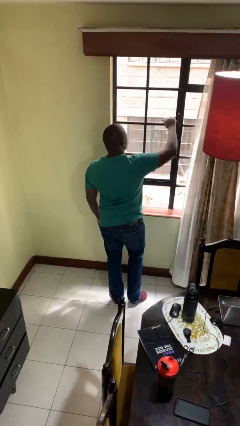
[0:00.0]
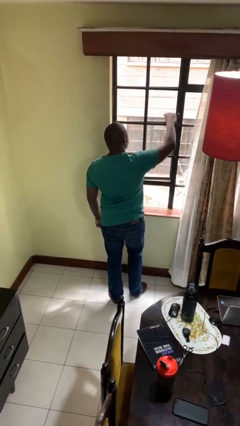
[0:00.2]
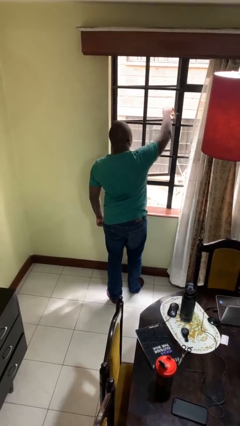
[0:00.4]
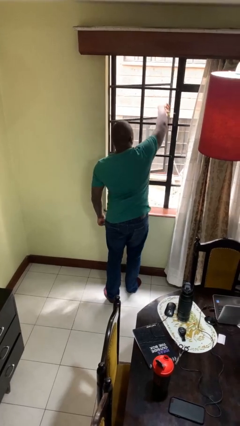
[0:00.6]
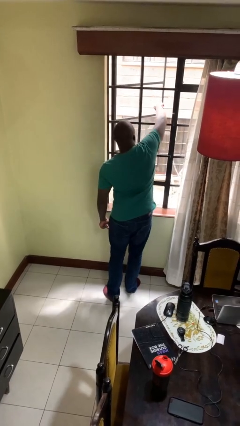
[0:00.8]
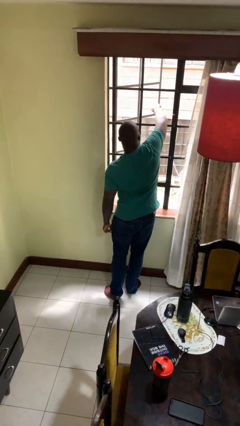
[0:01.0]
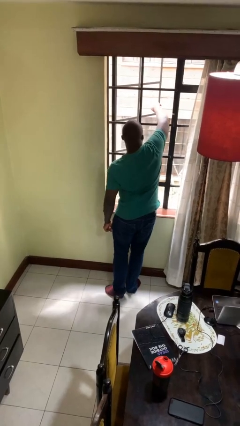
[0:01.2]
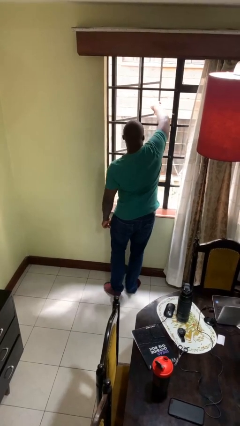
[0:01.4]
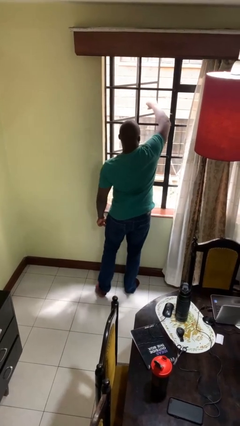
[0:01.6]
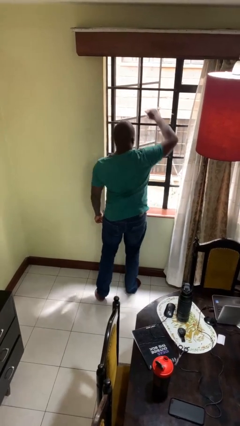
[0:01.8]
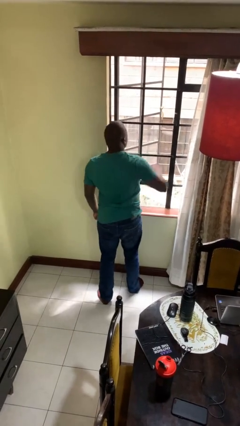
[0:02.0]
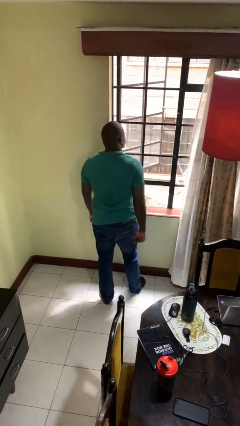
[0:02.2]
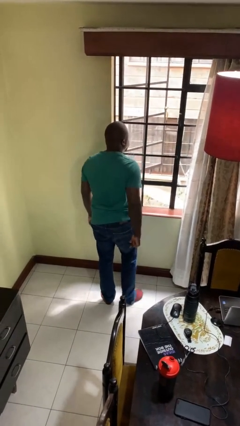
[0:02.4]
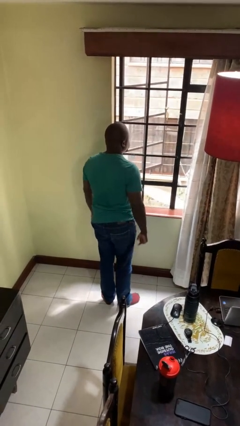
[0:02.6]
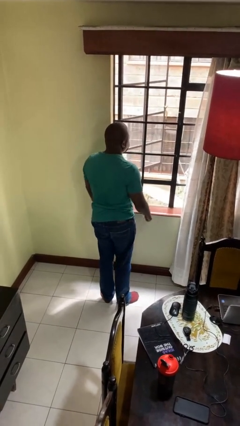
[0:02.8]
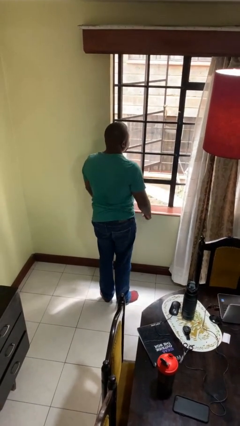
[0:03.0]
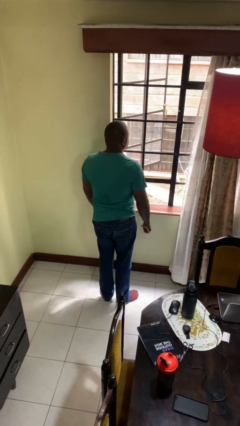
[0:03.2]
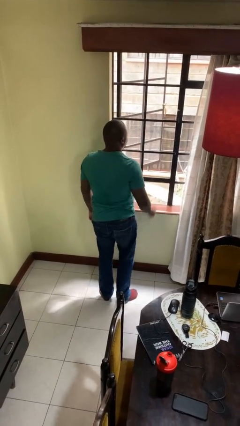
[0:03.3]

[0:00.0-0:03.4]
person opens home window

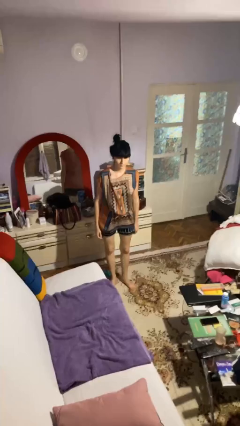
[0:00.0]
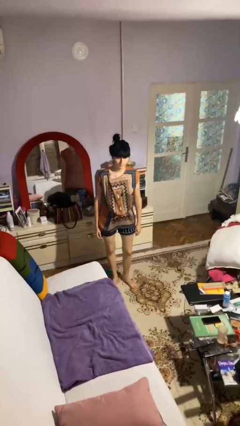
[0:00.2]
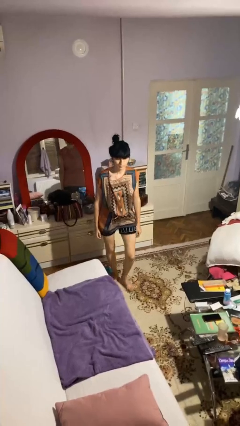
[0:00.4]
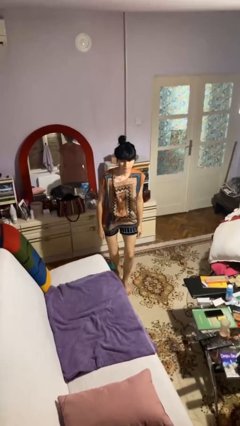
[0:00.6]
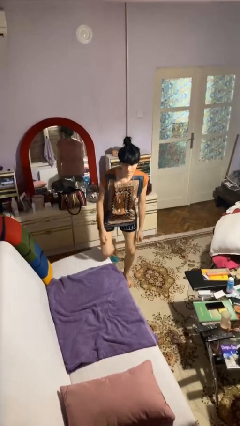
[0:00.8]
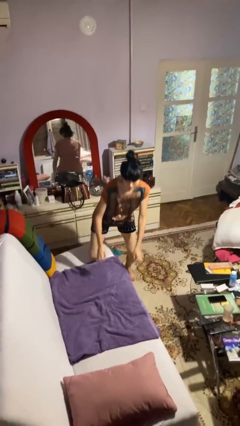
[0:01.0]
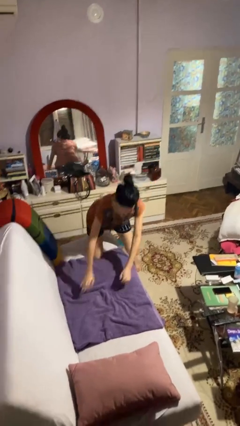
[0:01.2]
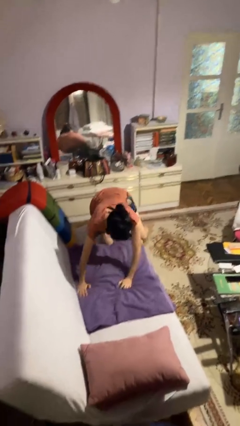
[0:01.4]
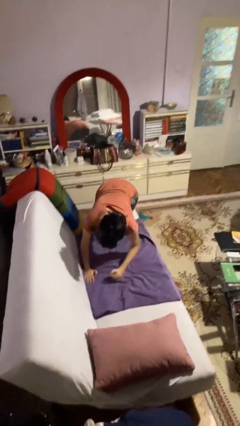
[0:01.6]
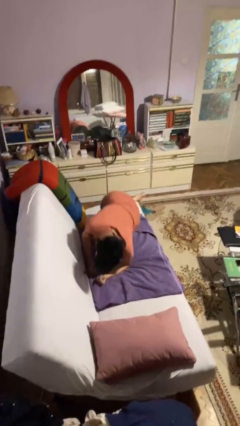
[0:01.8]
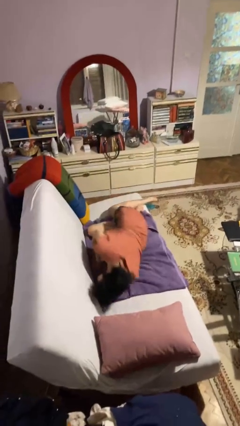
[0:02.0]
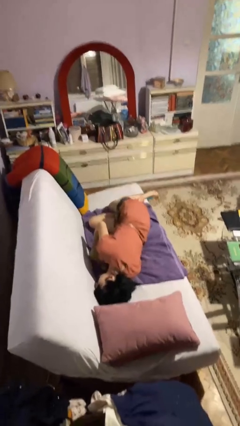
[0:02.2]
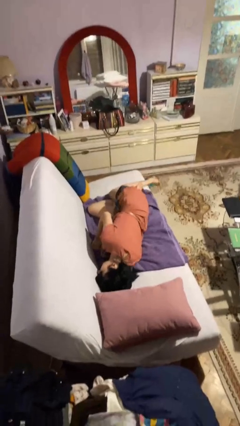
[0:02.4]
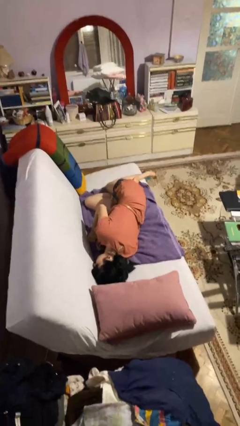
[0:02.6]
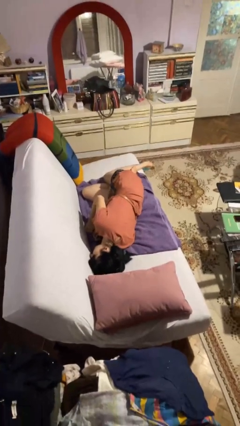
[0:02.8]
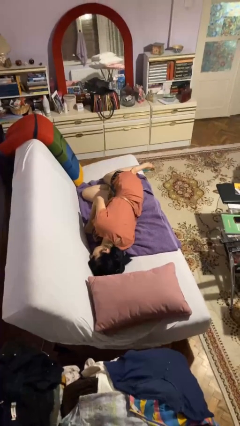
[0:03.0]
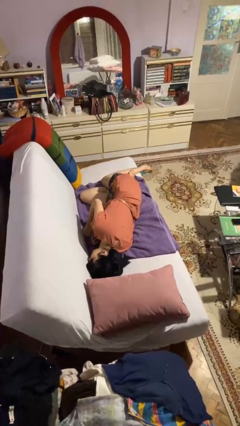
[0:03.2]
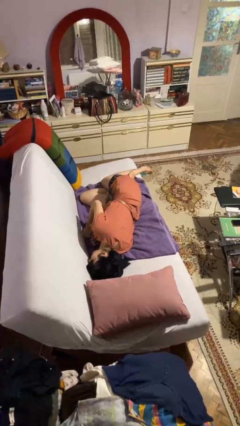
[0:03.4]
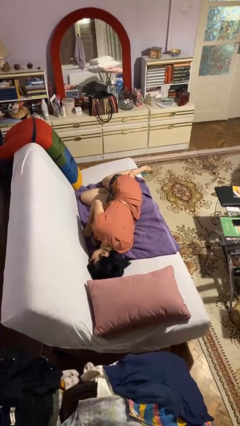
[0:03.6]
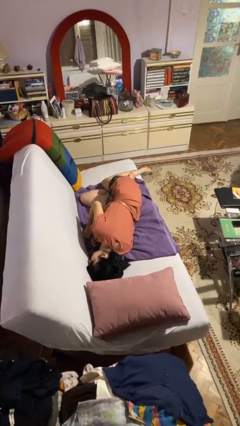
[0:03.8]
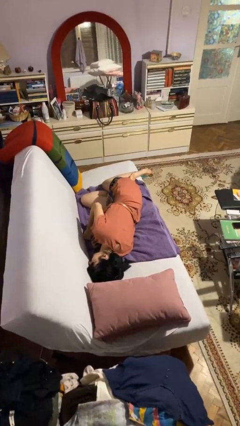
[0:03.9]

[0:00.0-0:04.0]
person lies down on couch

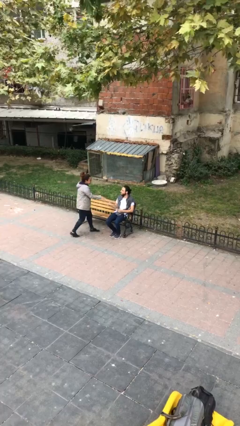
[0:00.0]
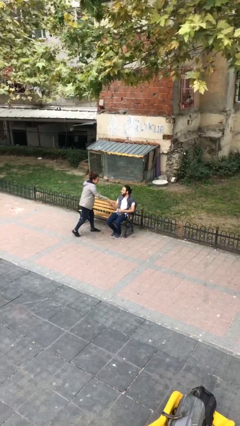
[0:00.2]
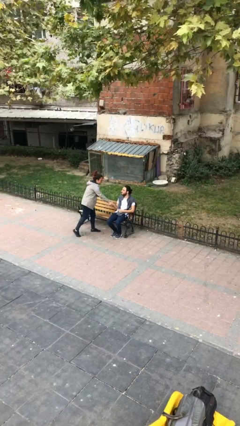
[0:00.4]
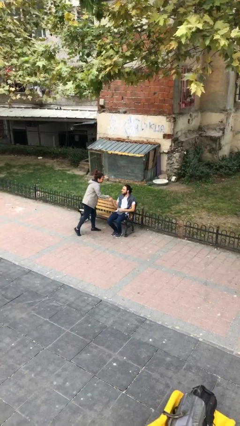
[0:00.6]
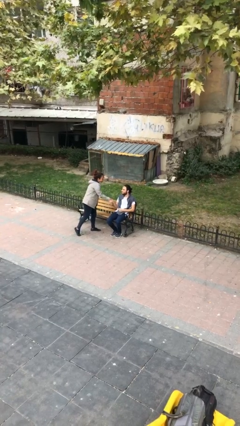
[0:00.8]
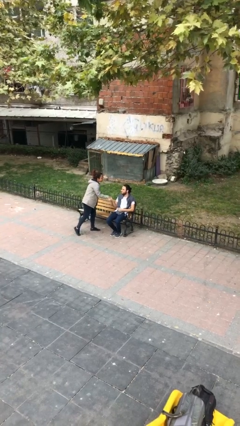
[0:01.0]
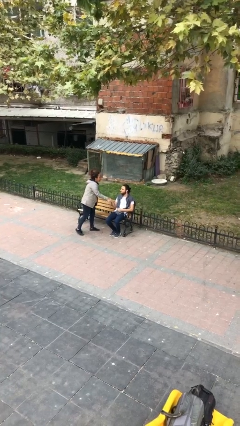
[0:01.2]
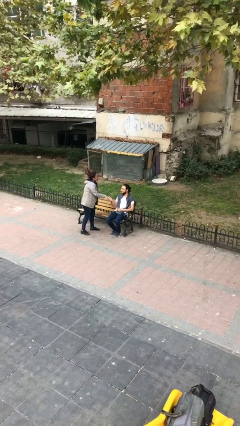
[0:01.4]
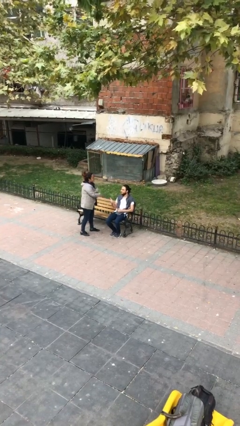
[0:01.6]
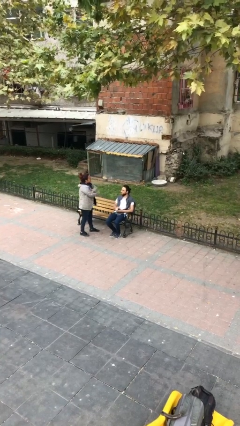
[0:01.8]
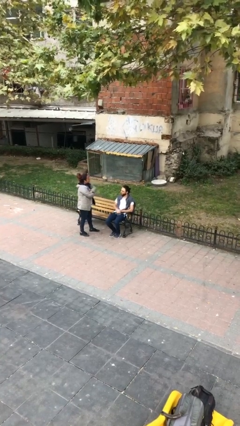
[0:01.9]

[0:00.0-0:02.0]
person shakes hand

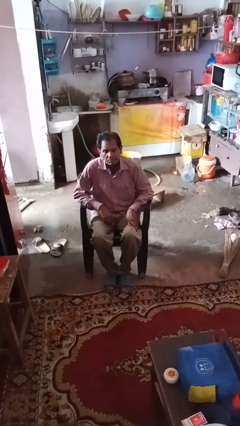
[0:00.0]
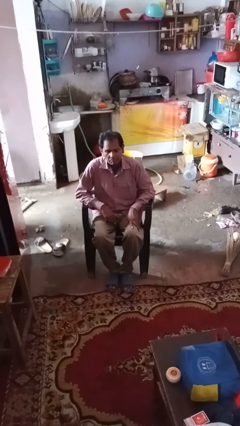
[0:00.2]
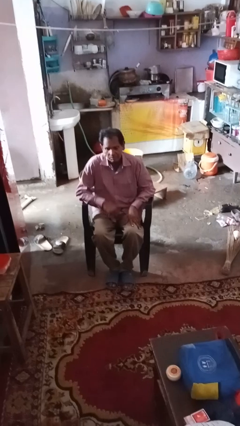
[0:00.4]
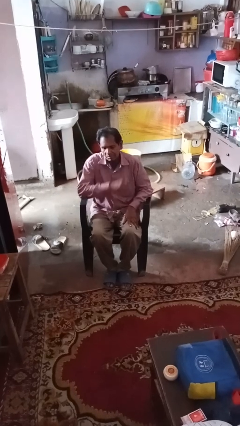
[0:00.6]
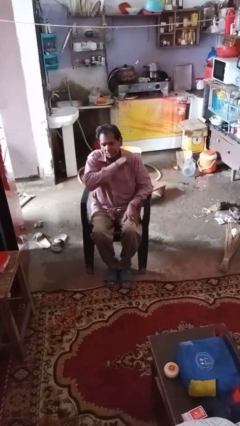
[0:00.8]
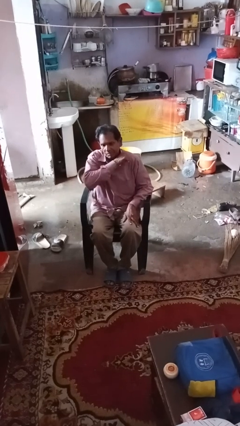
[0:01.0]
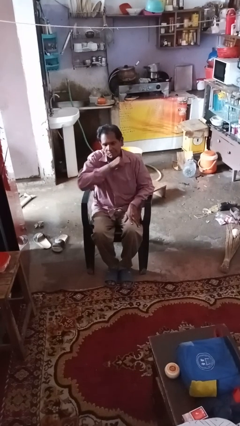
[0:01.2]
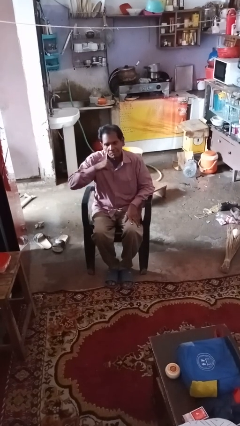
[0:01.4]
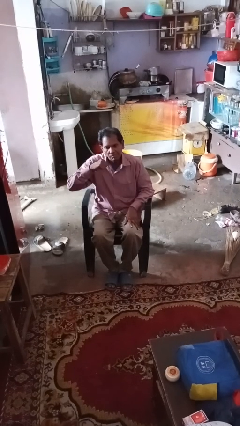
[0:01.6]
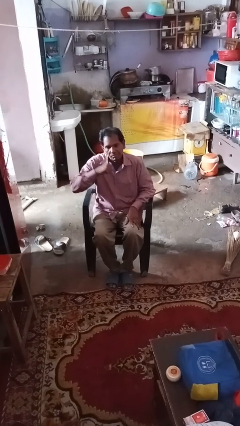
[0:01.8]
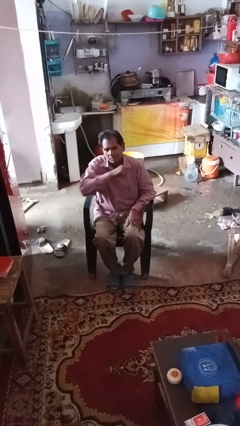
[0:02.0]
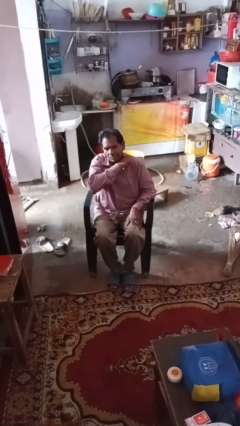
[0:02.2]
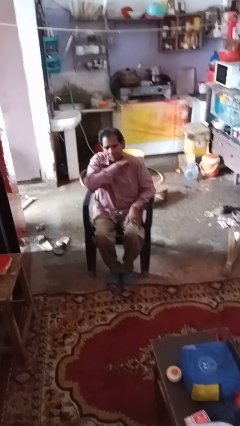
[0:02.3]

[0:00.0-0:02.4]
person gestures cut

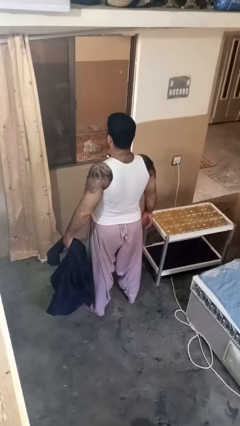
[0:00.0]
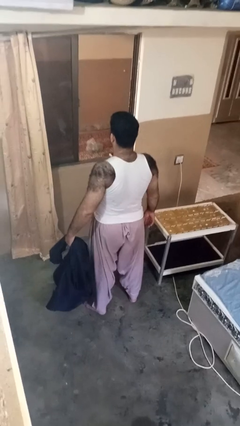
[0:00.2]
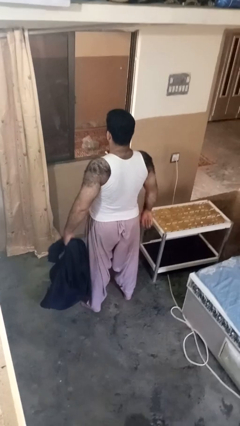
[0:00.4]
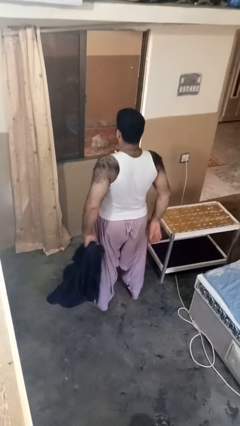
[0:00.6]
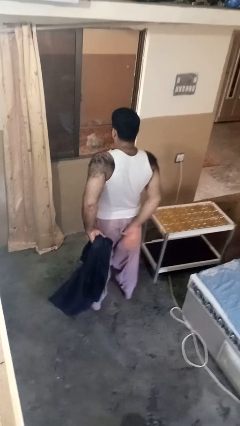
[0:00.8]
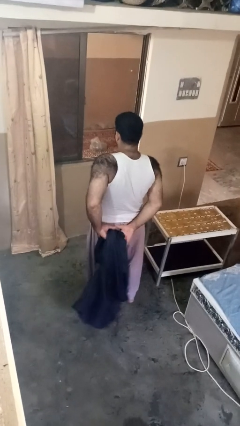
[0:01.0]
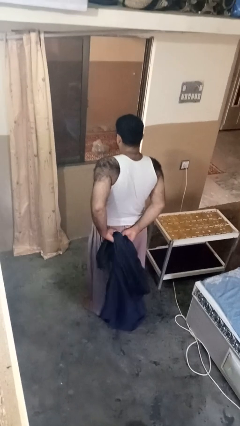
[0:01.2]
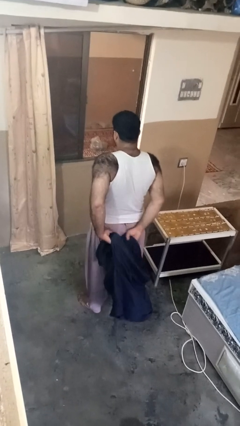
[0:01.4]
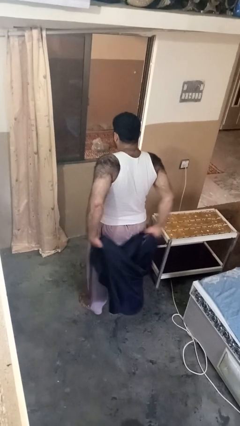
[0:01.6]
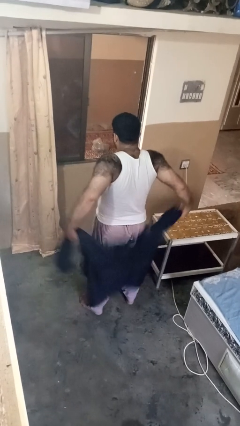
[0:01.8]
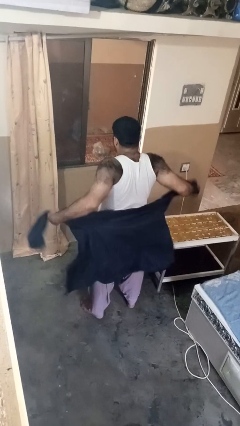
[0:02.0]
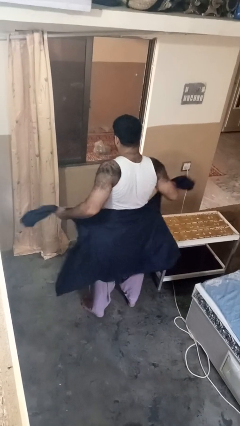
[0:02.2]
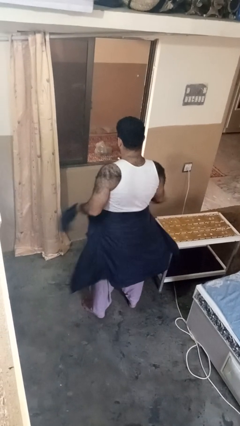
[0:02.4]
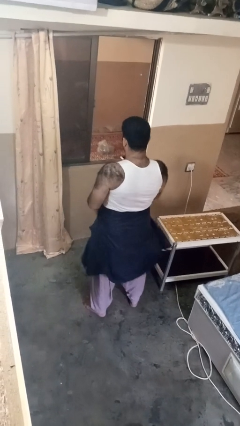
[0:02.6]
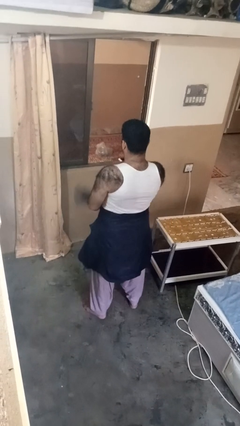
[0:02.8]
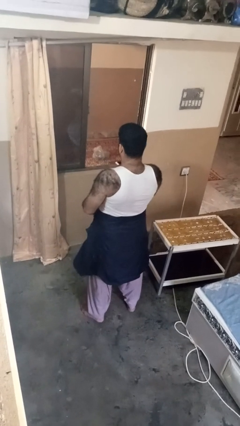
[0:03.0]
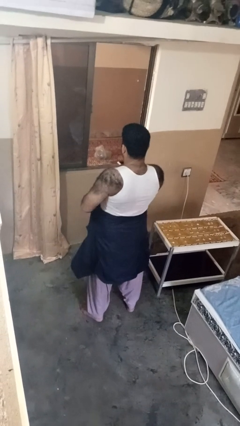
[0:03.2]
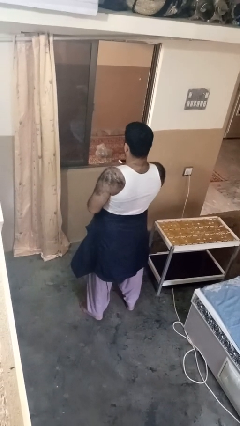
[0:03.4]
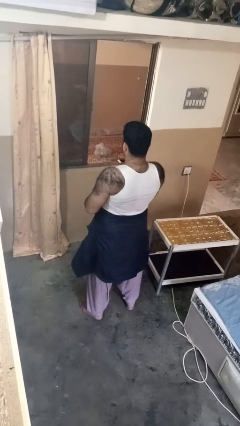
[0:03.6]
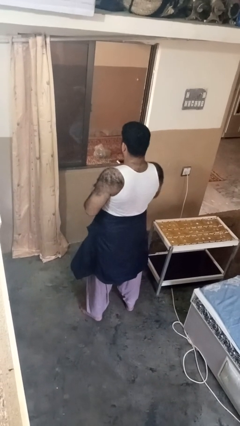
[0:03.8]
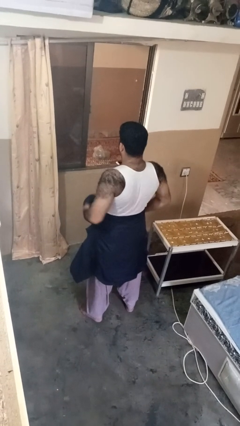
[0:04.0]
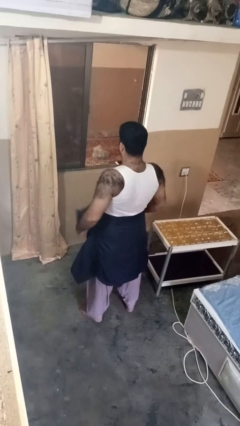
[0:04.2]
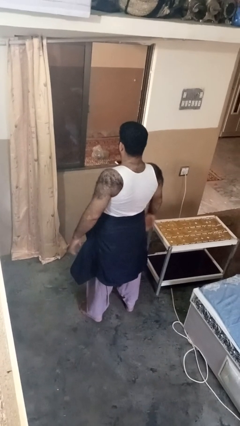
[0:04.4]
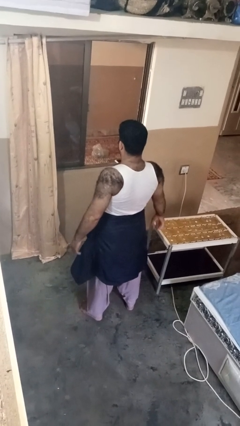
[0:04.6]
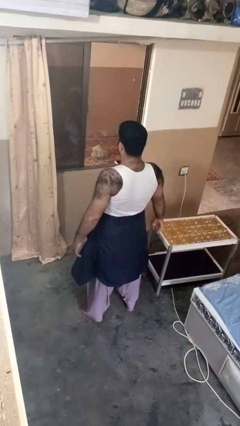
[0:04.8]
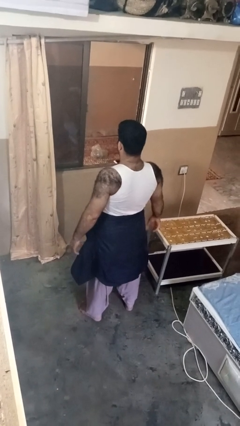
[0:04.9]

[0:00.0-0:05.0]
person ties jacket around waist

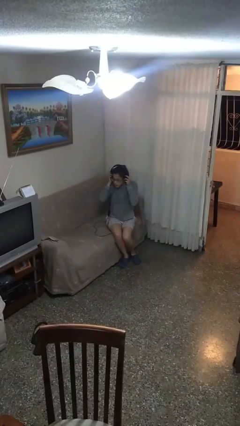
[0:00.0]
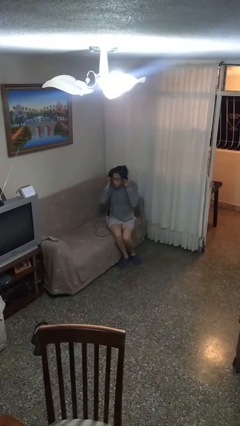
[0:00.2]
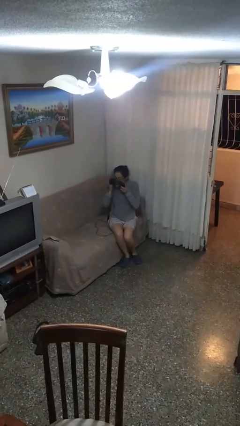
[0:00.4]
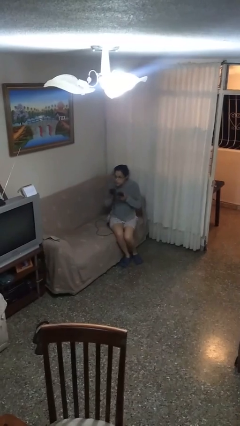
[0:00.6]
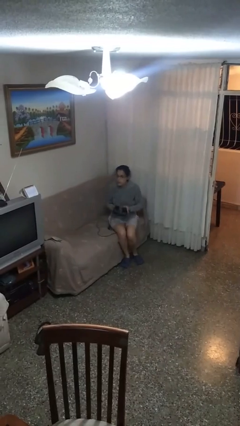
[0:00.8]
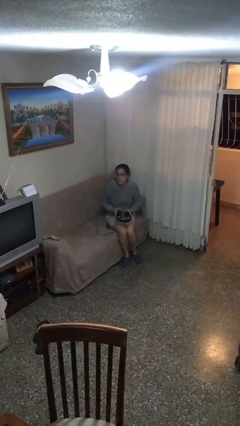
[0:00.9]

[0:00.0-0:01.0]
person takes off headphones
